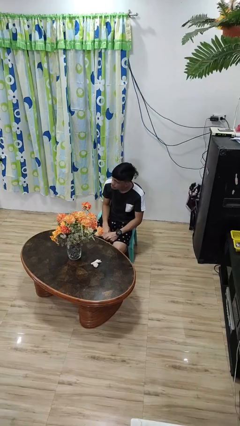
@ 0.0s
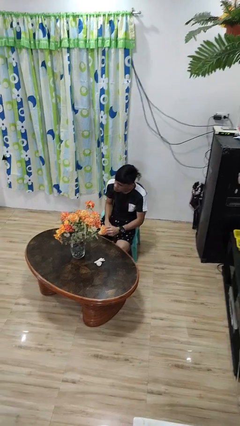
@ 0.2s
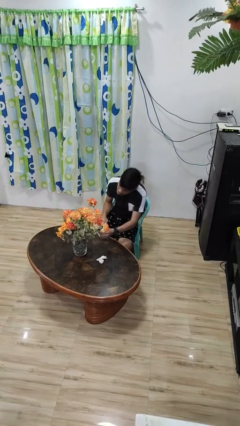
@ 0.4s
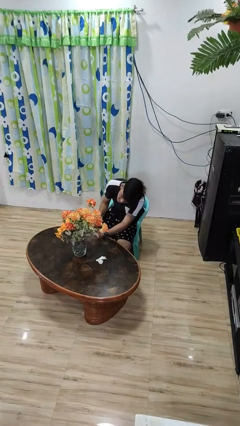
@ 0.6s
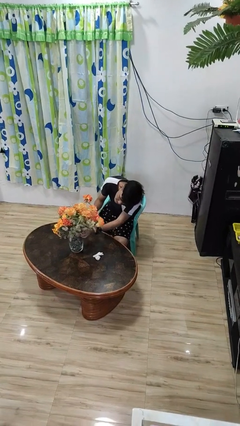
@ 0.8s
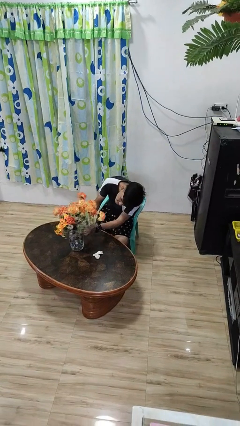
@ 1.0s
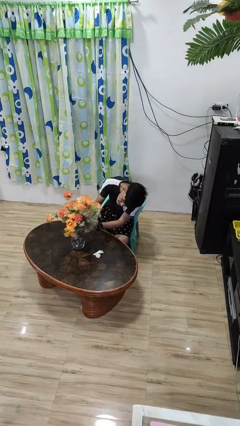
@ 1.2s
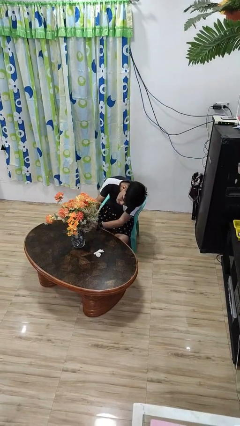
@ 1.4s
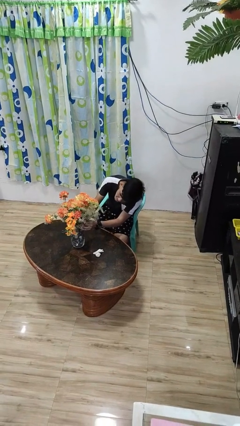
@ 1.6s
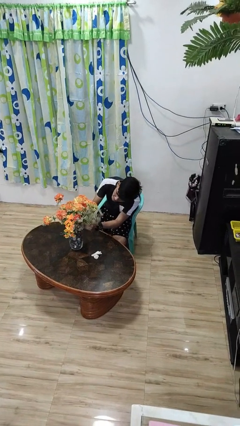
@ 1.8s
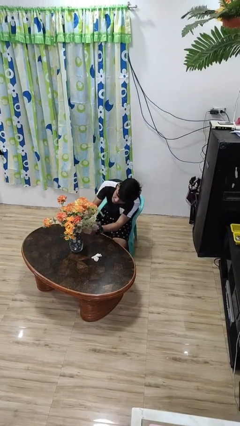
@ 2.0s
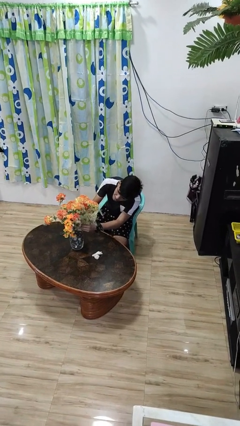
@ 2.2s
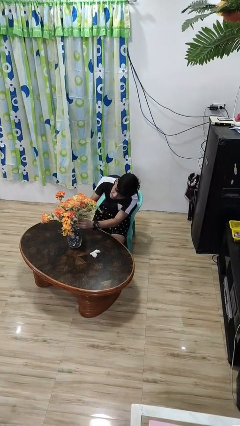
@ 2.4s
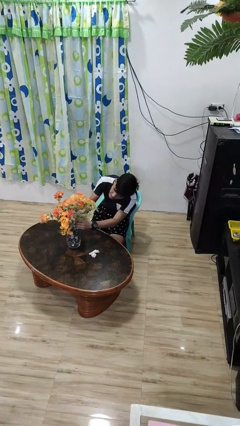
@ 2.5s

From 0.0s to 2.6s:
person arranges flowers in vase

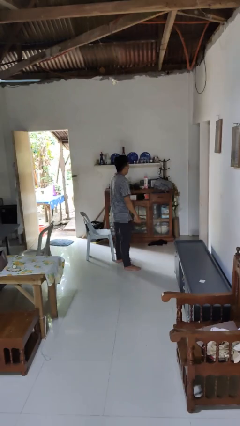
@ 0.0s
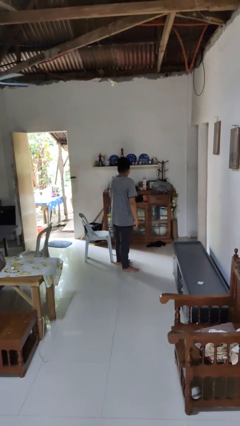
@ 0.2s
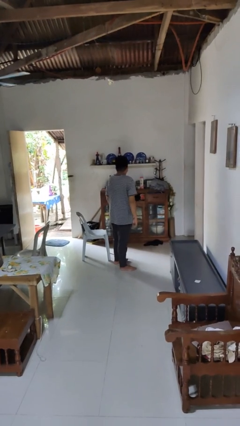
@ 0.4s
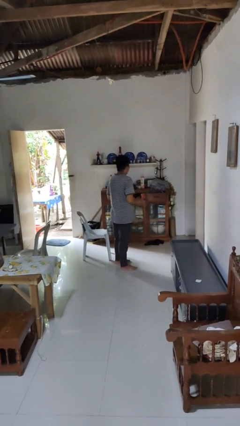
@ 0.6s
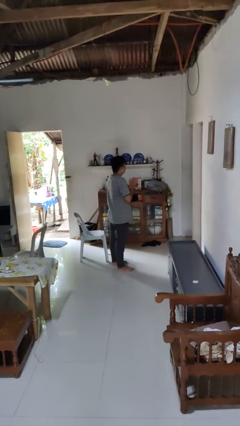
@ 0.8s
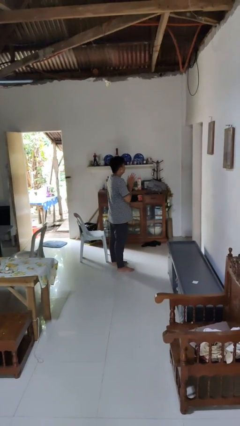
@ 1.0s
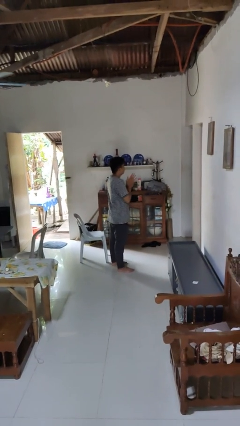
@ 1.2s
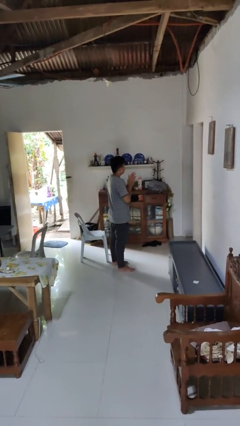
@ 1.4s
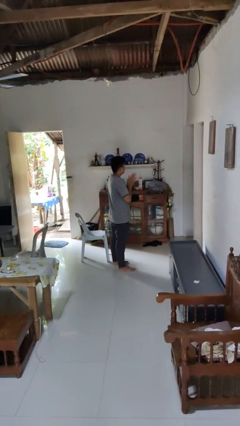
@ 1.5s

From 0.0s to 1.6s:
person claps hands

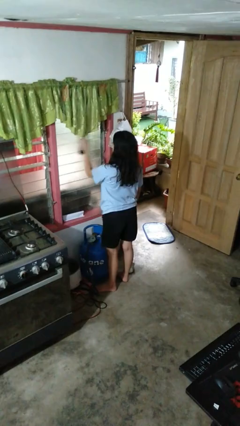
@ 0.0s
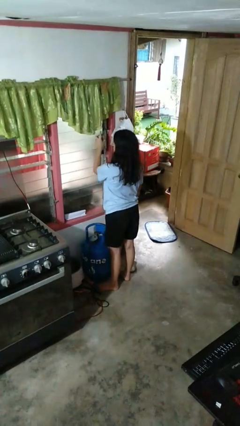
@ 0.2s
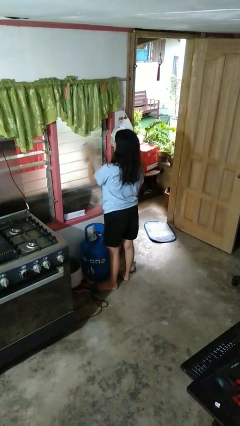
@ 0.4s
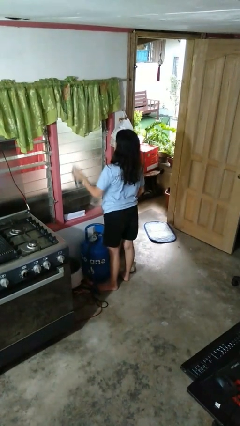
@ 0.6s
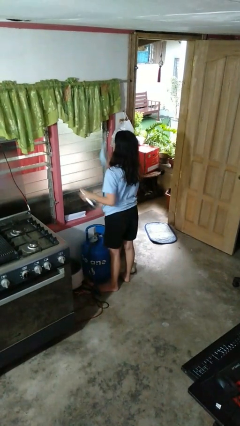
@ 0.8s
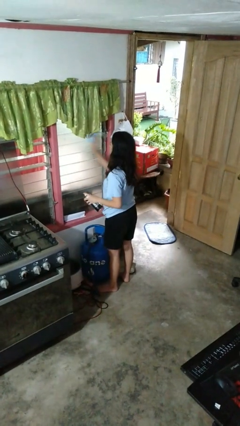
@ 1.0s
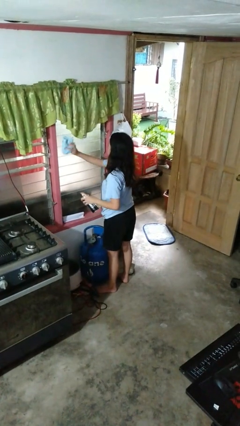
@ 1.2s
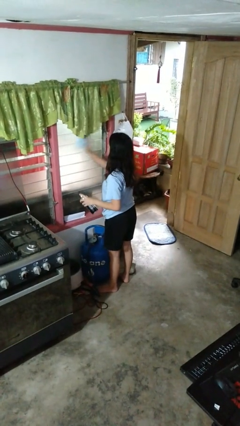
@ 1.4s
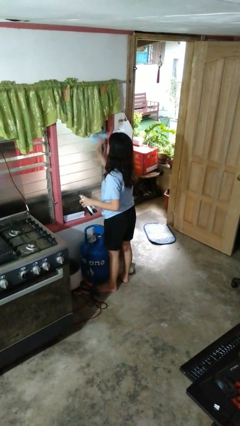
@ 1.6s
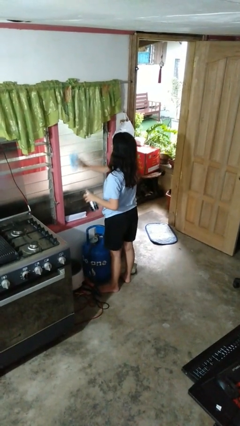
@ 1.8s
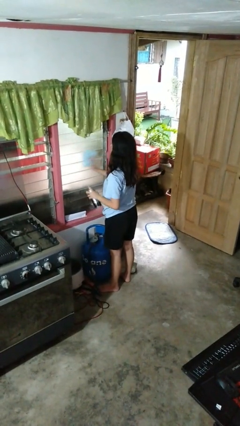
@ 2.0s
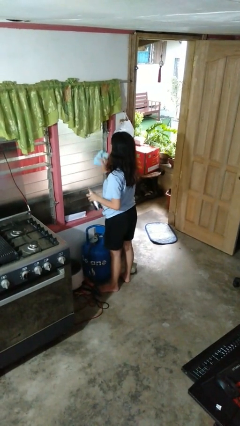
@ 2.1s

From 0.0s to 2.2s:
person washes window

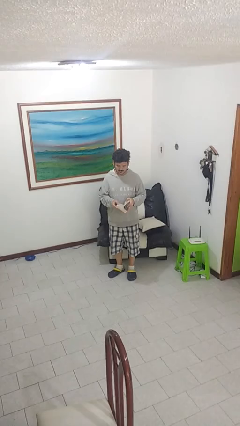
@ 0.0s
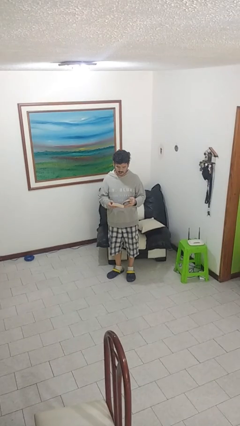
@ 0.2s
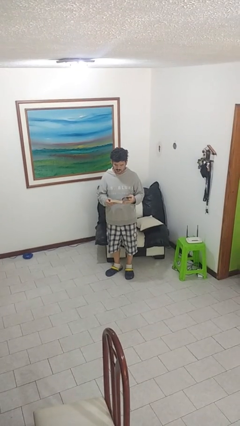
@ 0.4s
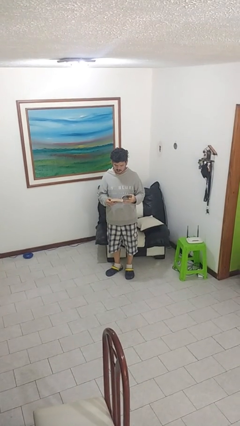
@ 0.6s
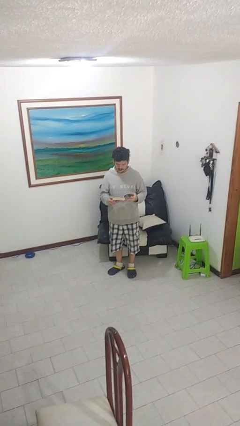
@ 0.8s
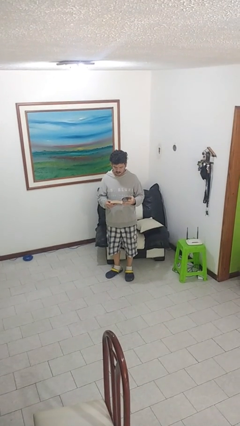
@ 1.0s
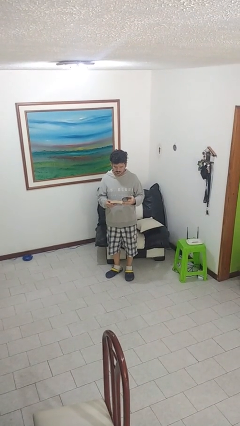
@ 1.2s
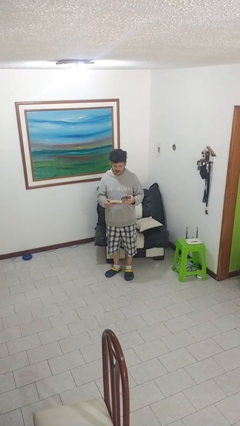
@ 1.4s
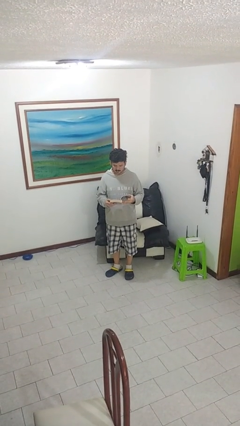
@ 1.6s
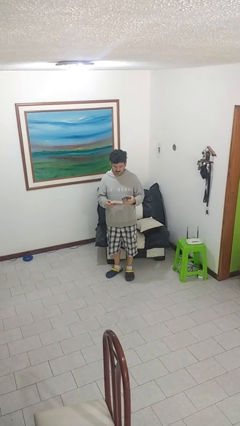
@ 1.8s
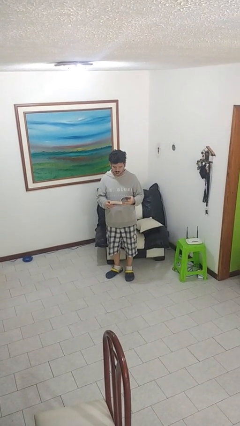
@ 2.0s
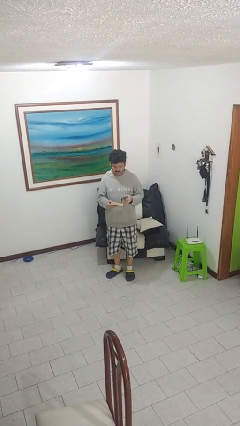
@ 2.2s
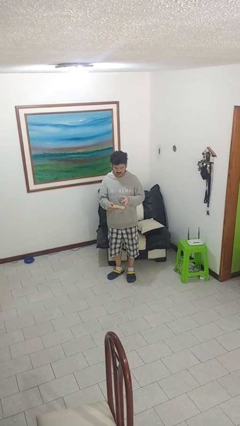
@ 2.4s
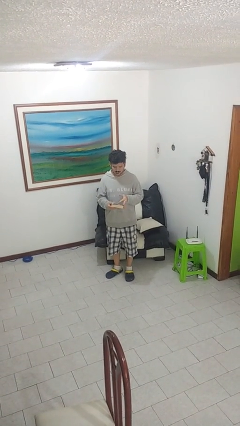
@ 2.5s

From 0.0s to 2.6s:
person reads book

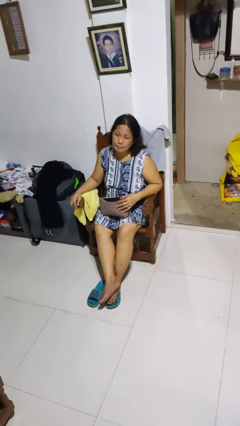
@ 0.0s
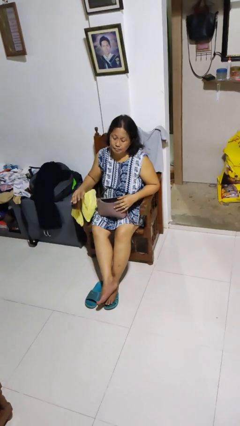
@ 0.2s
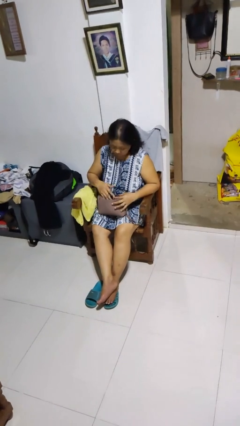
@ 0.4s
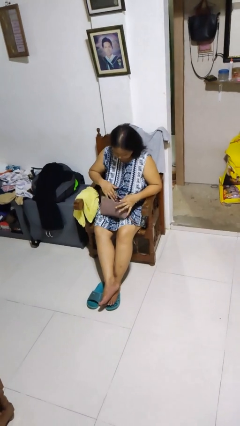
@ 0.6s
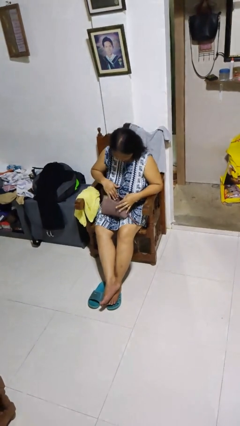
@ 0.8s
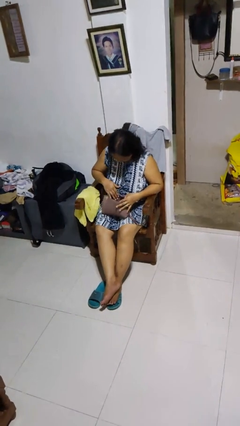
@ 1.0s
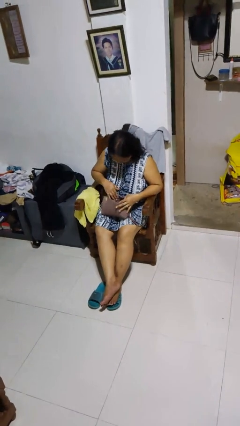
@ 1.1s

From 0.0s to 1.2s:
person searches in purse

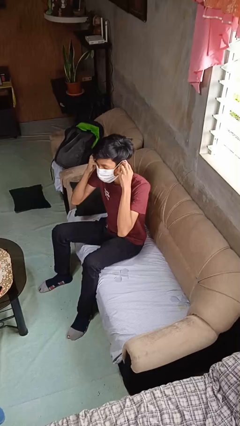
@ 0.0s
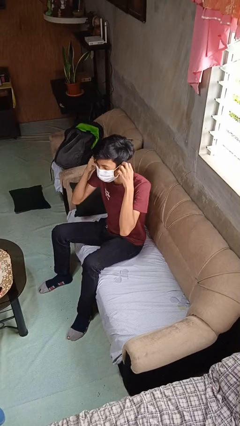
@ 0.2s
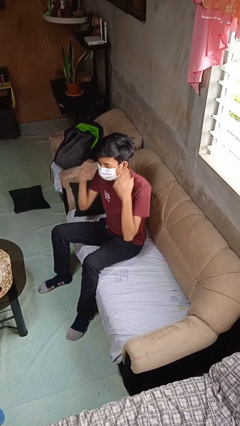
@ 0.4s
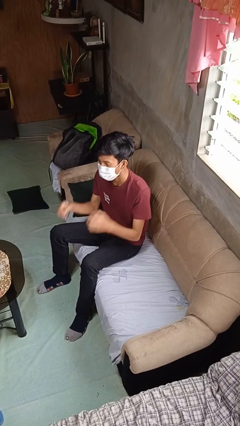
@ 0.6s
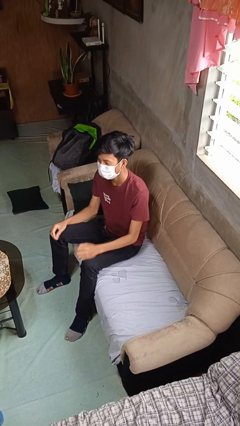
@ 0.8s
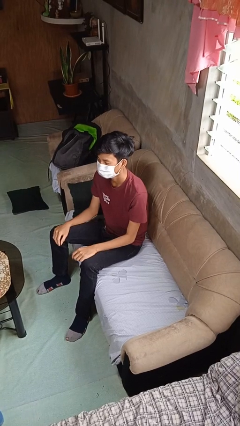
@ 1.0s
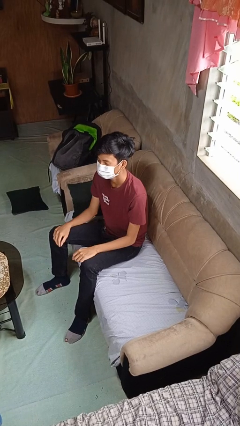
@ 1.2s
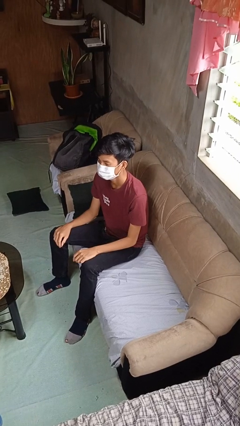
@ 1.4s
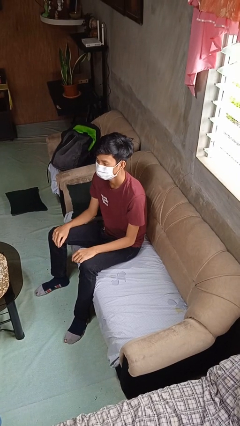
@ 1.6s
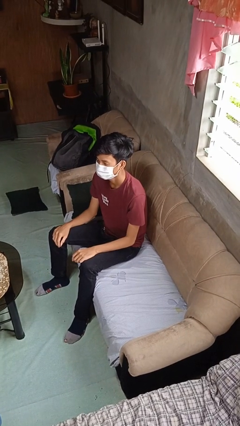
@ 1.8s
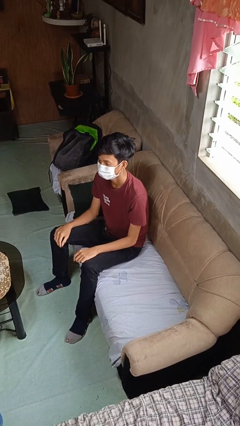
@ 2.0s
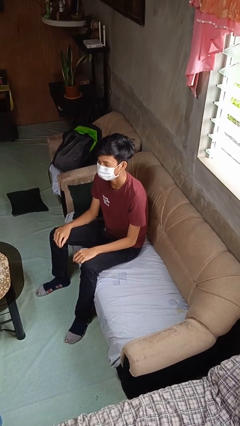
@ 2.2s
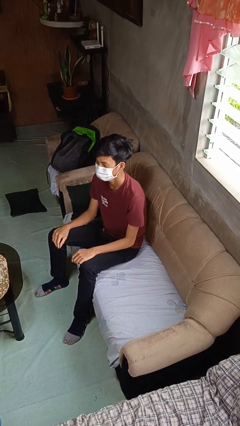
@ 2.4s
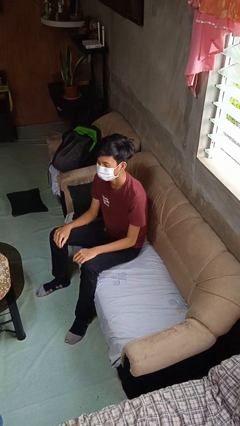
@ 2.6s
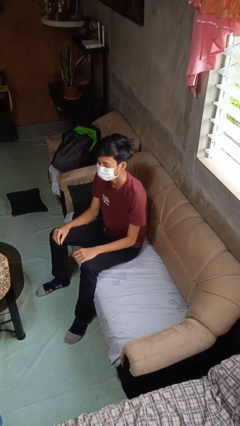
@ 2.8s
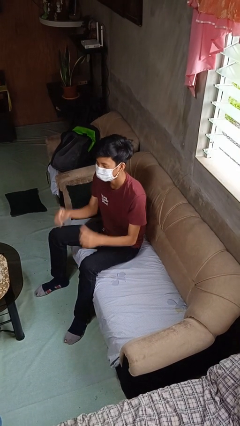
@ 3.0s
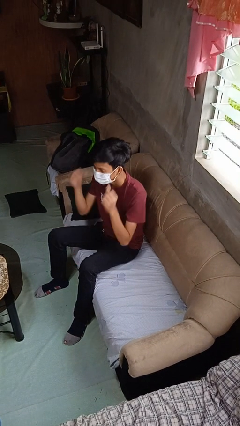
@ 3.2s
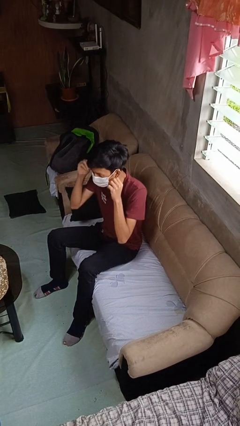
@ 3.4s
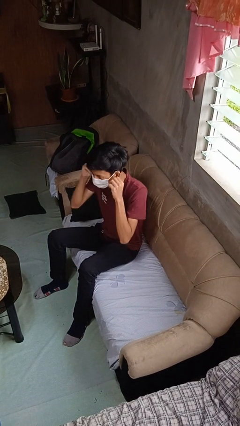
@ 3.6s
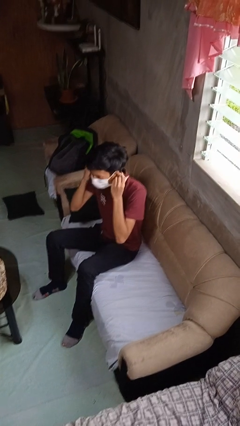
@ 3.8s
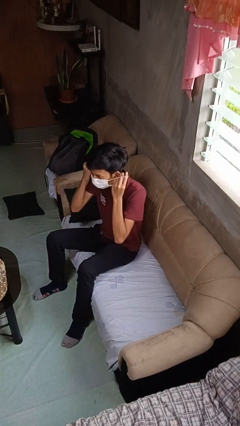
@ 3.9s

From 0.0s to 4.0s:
person puts on facemask

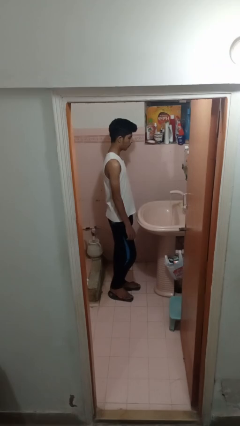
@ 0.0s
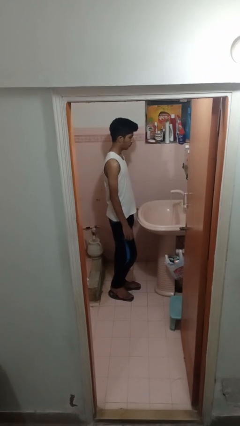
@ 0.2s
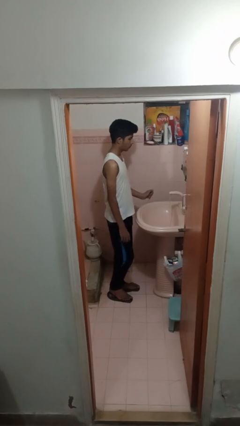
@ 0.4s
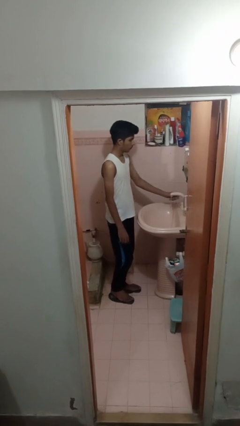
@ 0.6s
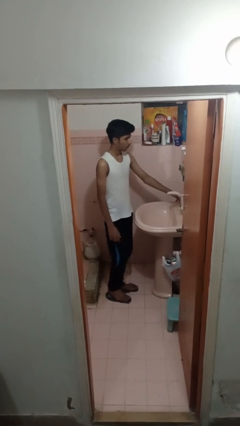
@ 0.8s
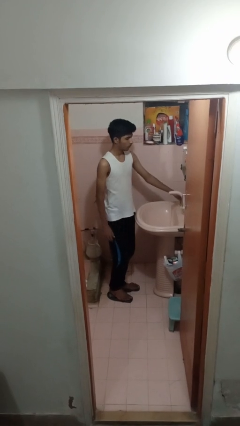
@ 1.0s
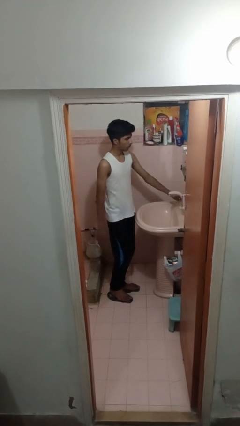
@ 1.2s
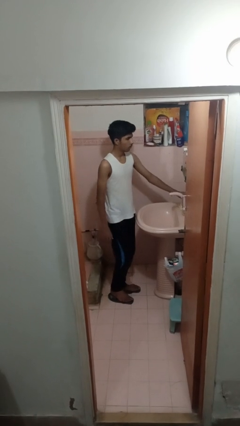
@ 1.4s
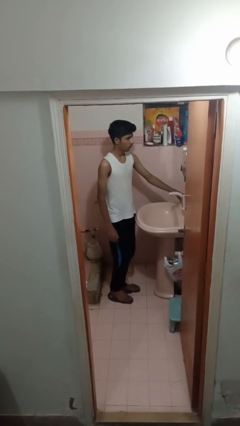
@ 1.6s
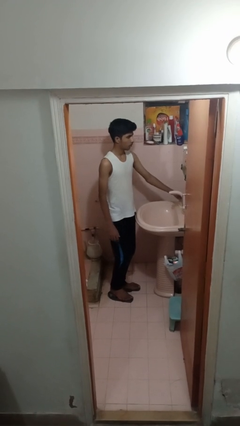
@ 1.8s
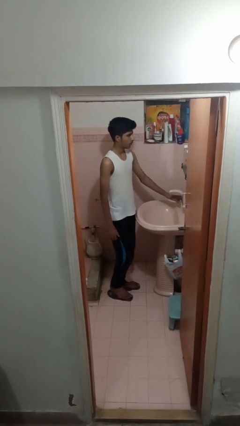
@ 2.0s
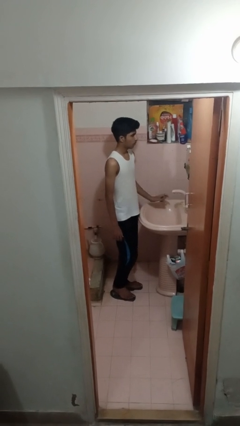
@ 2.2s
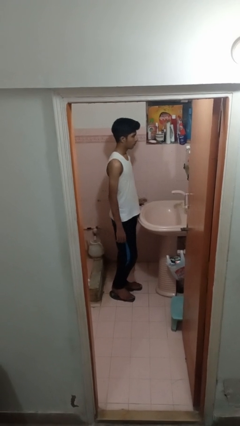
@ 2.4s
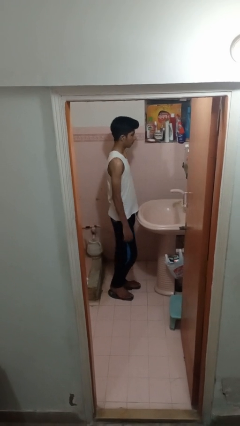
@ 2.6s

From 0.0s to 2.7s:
person turns off faucet
